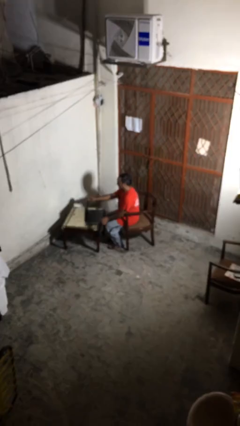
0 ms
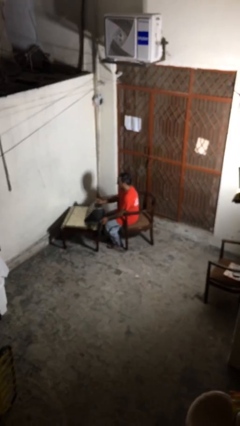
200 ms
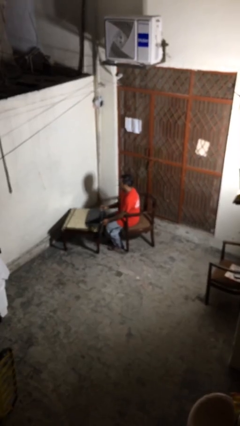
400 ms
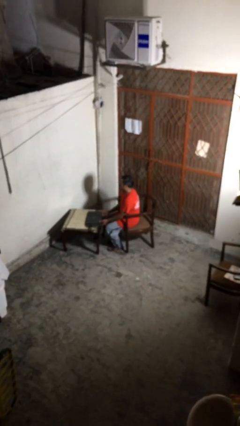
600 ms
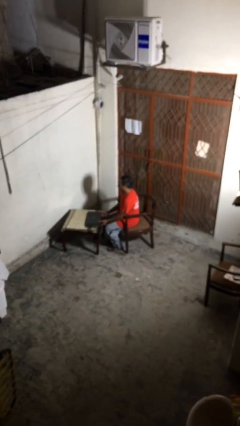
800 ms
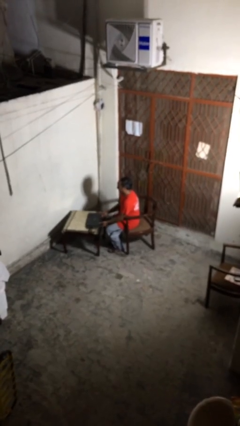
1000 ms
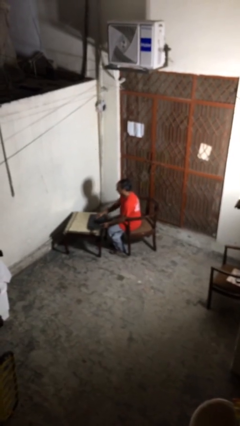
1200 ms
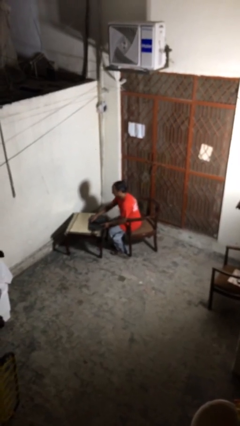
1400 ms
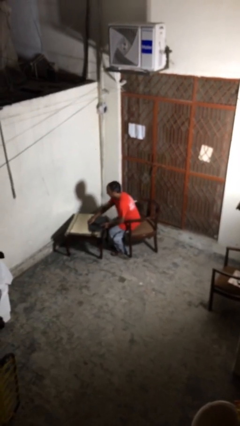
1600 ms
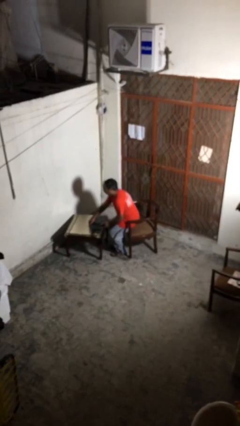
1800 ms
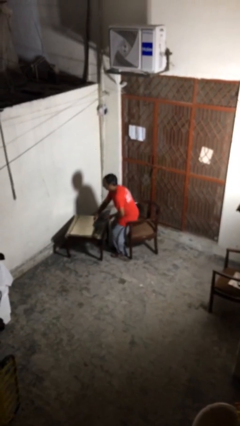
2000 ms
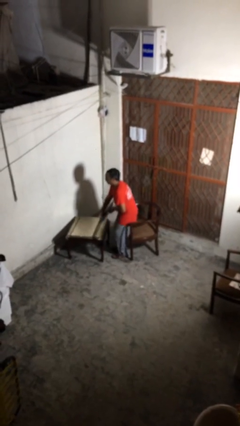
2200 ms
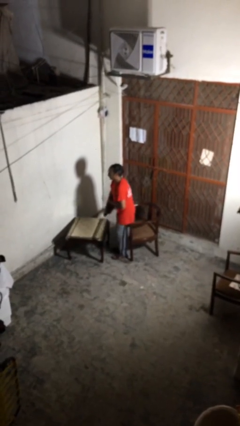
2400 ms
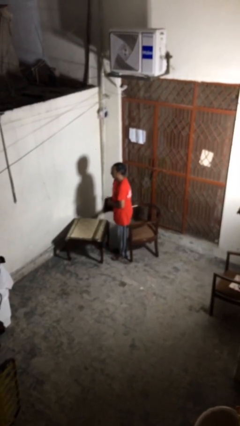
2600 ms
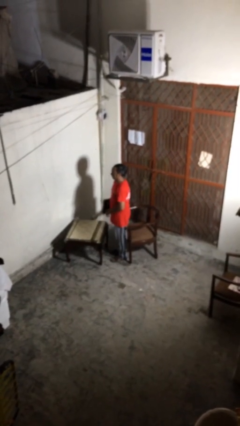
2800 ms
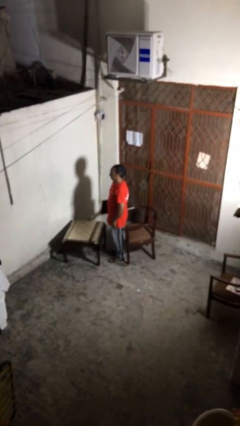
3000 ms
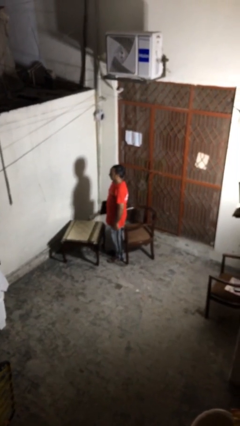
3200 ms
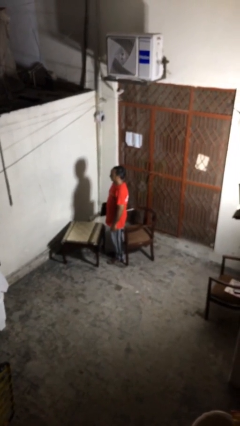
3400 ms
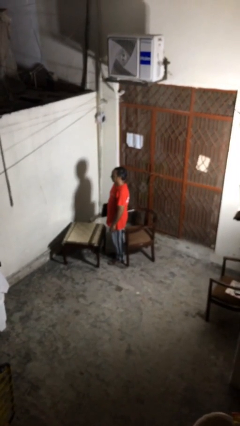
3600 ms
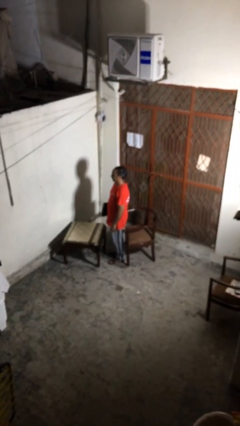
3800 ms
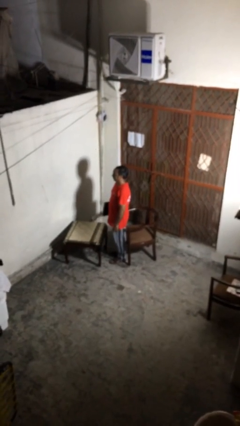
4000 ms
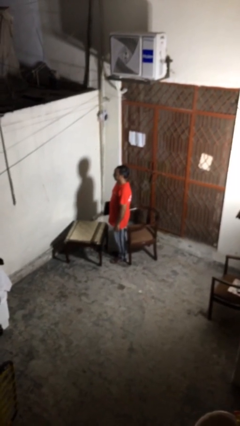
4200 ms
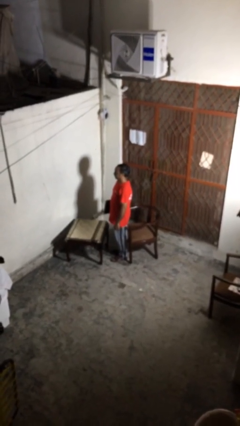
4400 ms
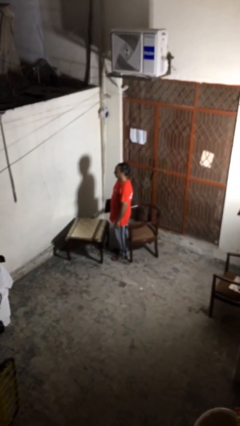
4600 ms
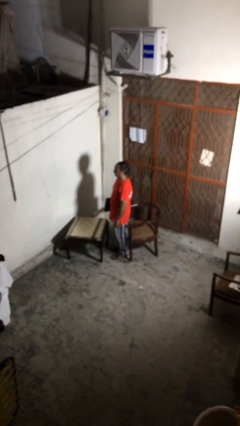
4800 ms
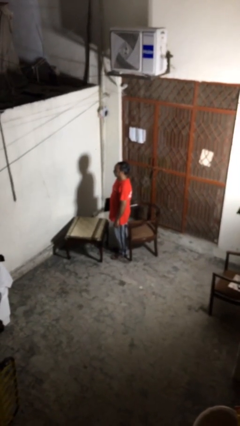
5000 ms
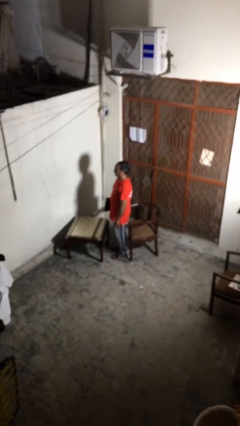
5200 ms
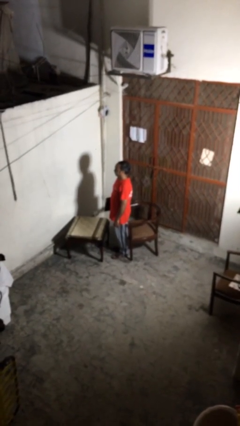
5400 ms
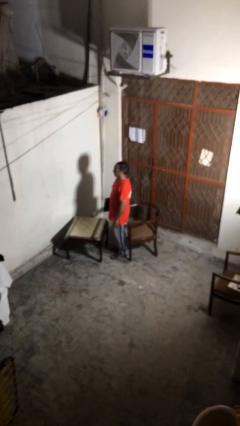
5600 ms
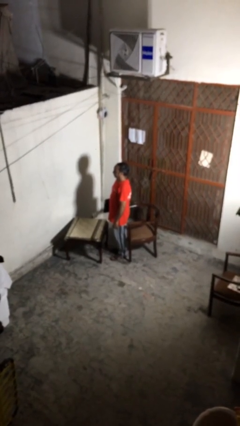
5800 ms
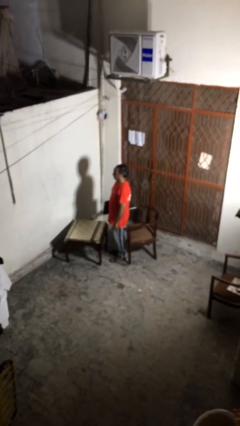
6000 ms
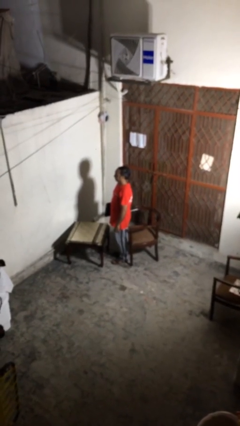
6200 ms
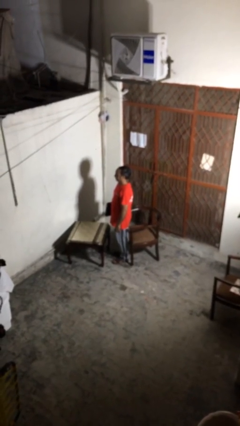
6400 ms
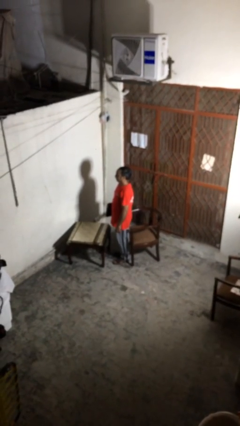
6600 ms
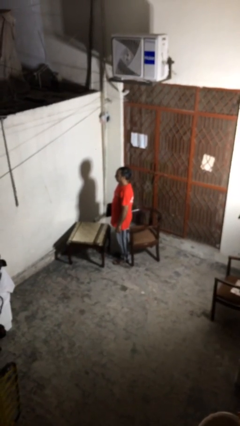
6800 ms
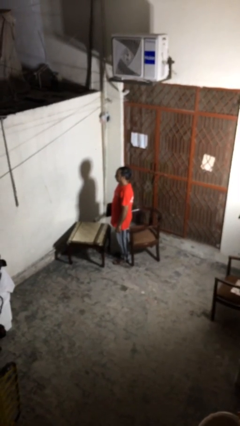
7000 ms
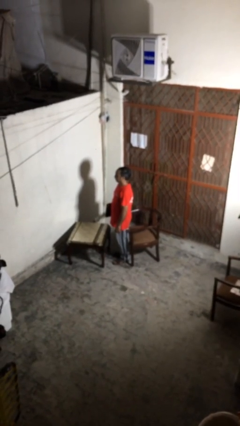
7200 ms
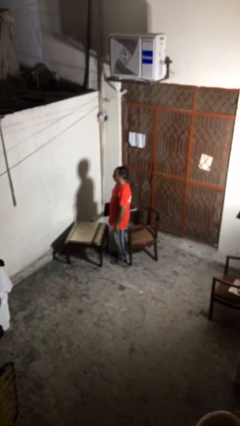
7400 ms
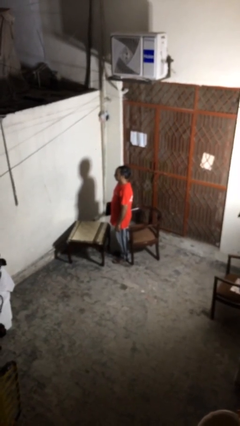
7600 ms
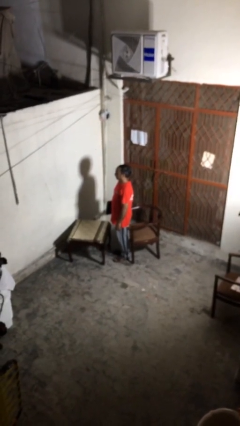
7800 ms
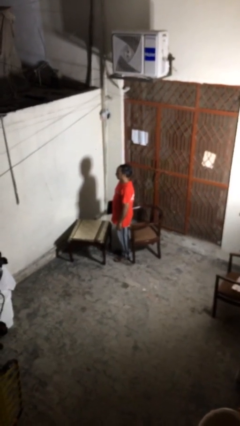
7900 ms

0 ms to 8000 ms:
person stands up

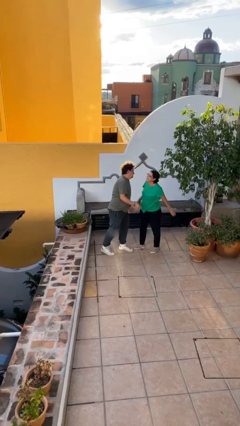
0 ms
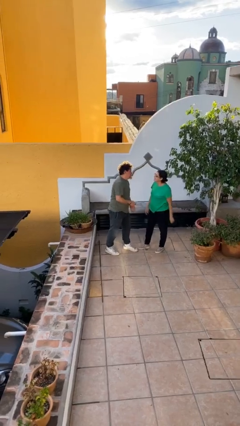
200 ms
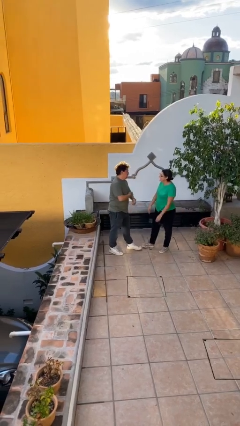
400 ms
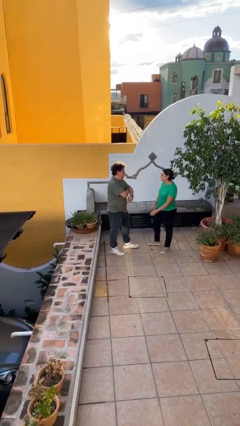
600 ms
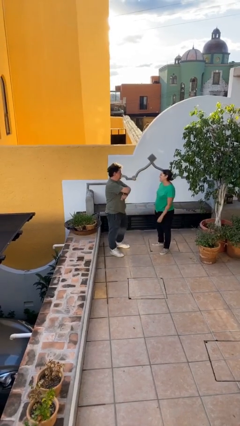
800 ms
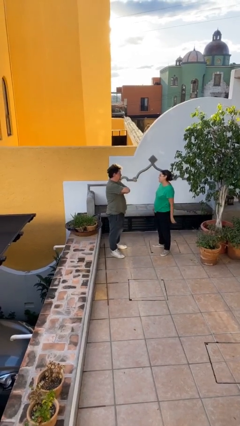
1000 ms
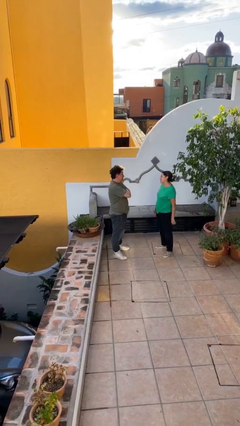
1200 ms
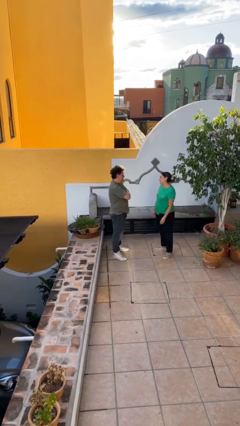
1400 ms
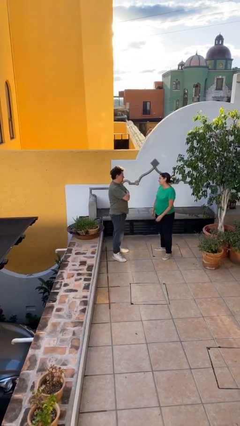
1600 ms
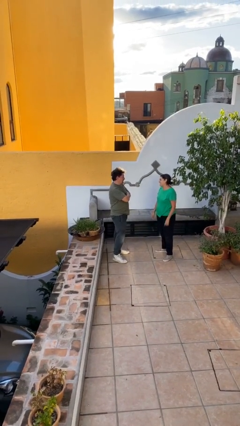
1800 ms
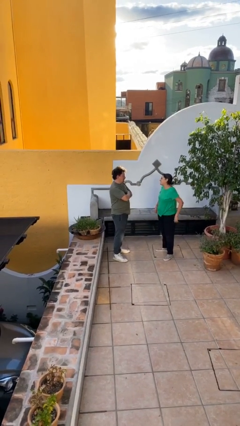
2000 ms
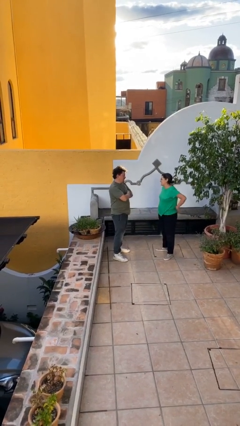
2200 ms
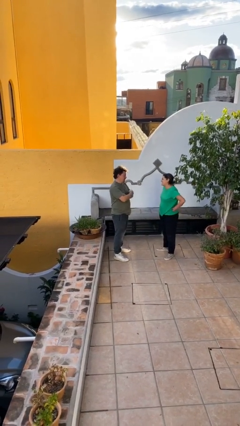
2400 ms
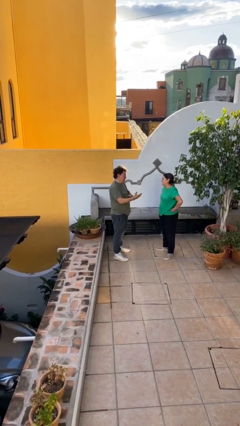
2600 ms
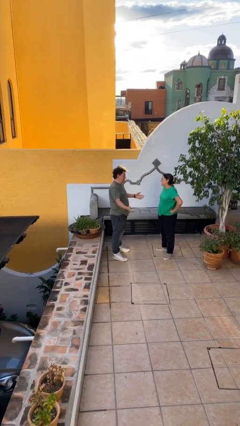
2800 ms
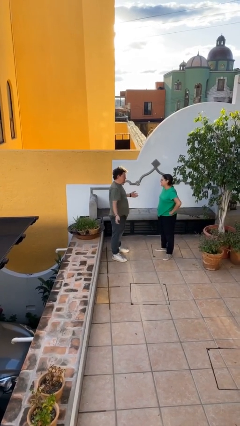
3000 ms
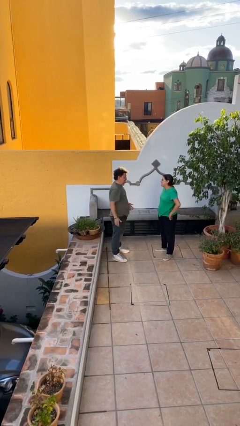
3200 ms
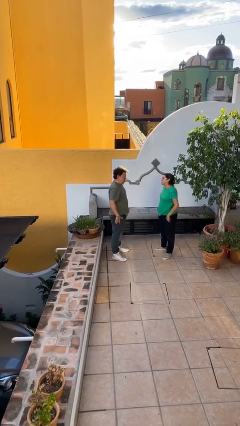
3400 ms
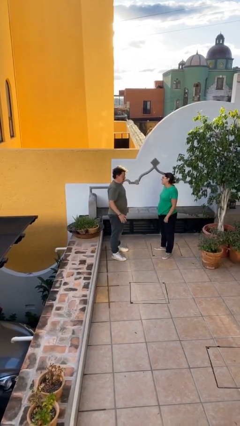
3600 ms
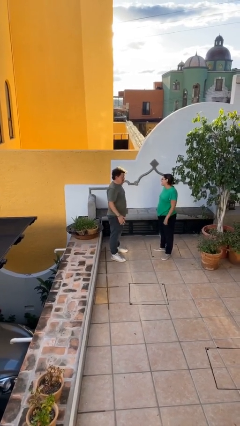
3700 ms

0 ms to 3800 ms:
person talks to person

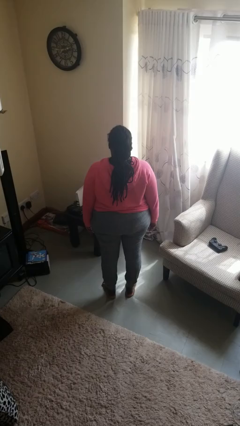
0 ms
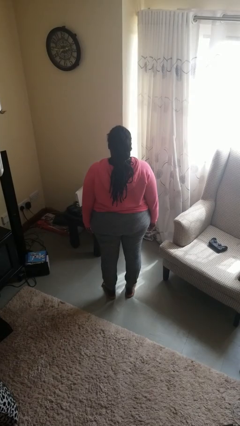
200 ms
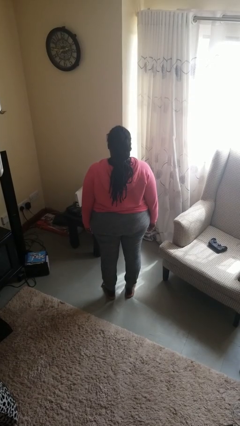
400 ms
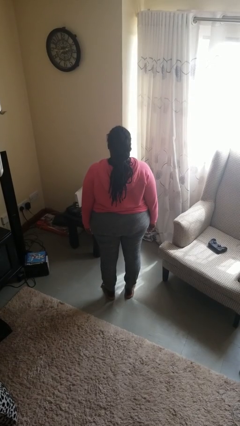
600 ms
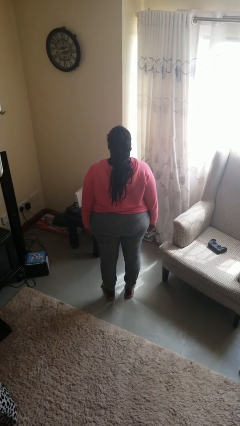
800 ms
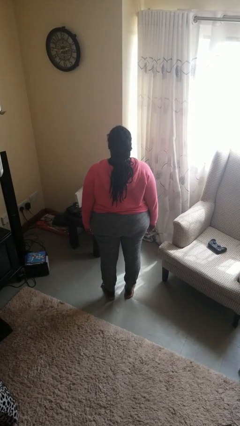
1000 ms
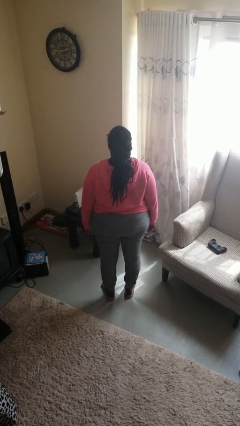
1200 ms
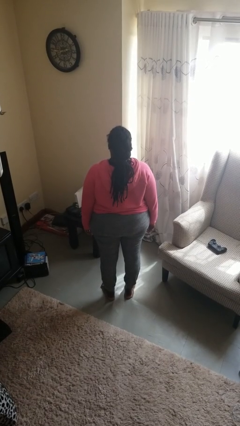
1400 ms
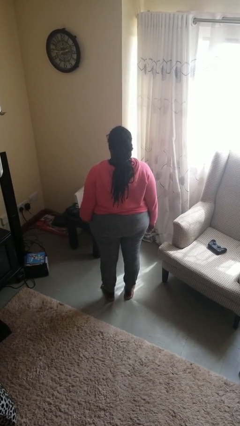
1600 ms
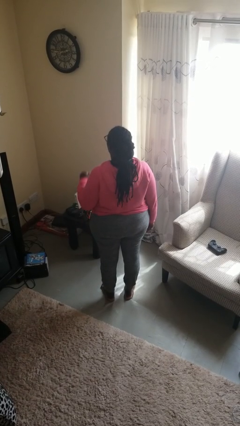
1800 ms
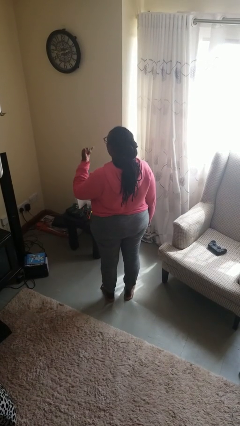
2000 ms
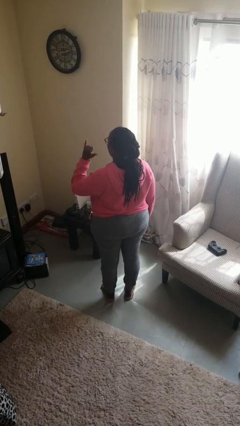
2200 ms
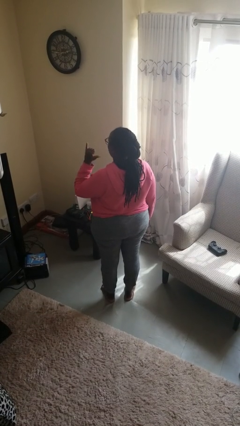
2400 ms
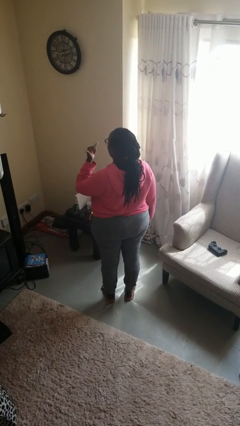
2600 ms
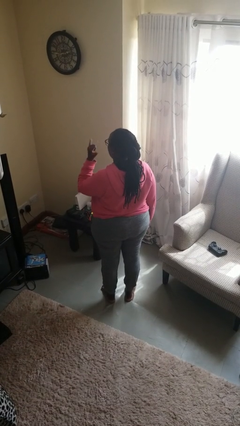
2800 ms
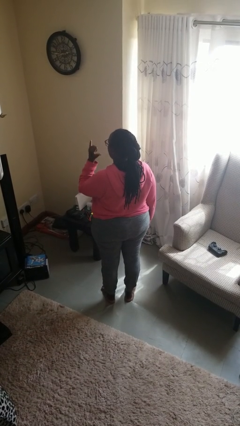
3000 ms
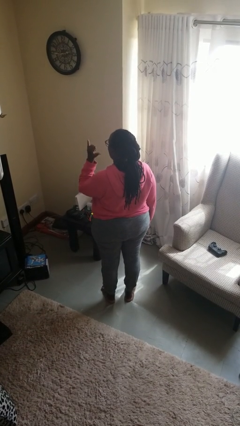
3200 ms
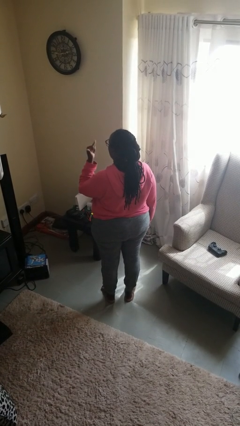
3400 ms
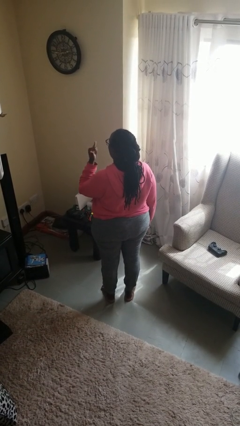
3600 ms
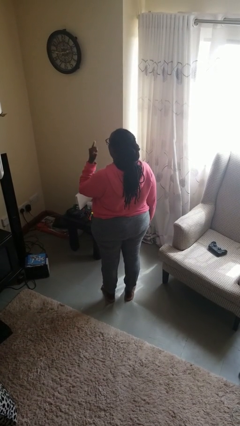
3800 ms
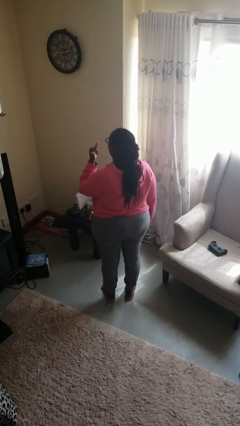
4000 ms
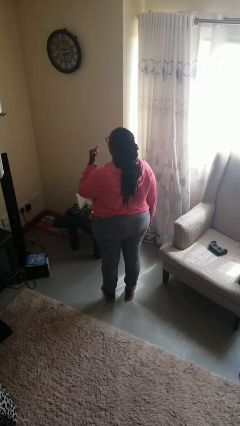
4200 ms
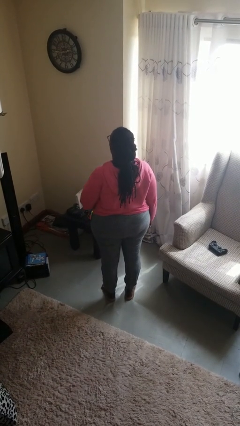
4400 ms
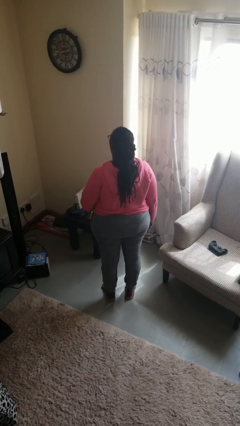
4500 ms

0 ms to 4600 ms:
person gestures hang loose

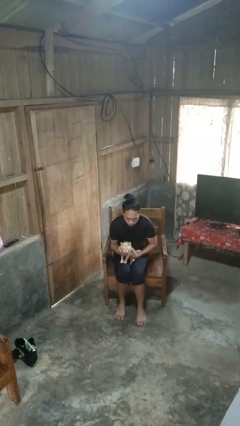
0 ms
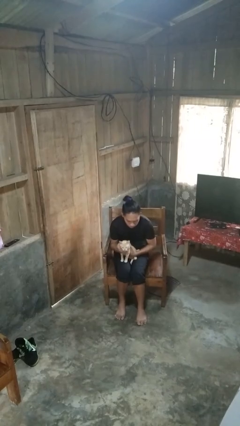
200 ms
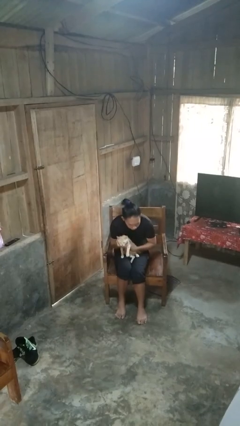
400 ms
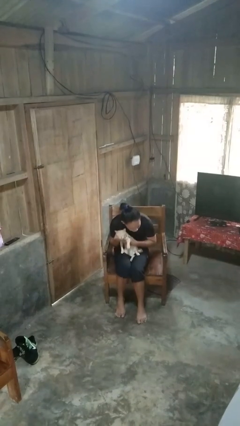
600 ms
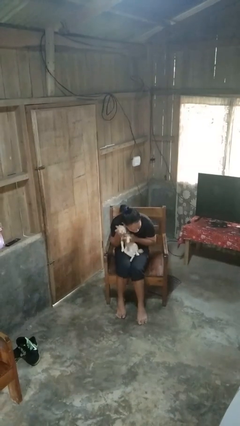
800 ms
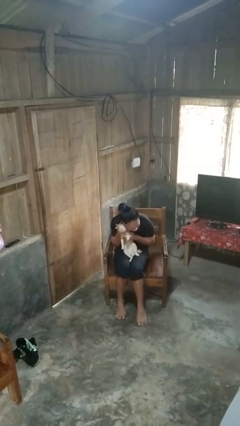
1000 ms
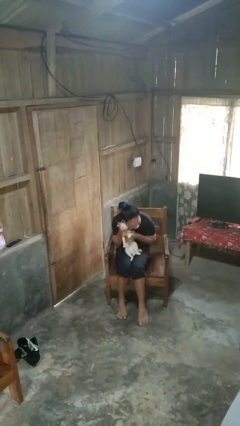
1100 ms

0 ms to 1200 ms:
person hugs cat

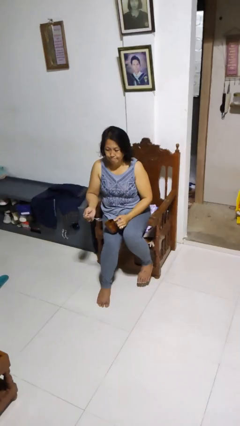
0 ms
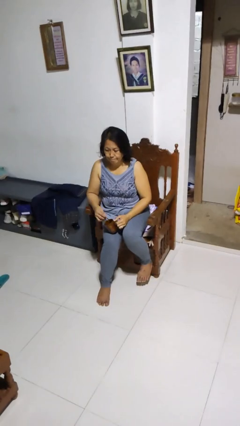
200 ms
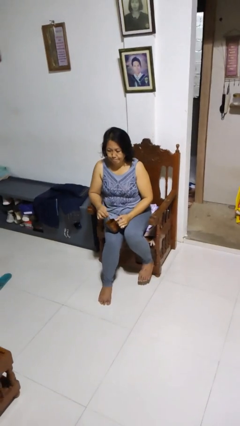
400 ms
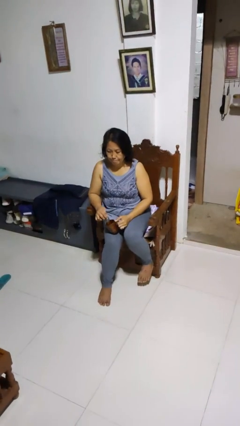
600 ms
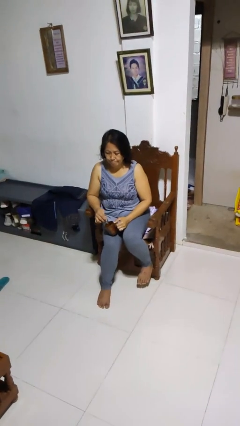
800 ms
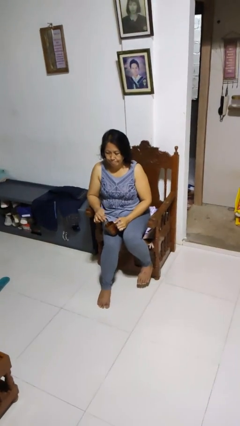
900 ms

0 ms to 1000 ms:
person stirs mug
